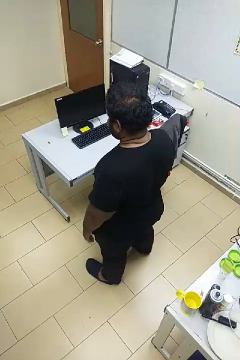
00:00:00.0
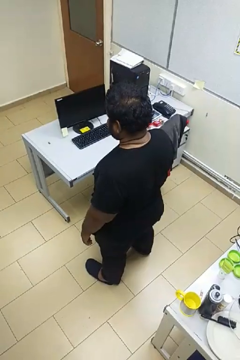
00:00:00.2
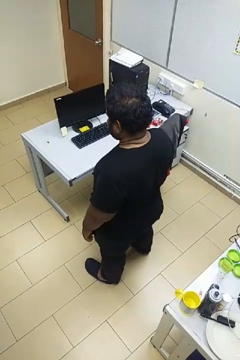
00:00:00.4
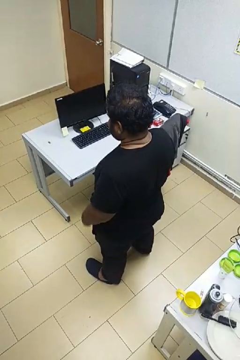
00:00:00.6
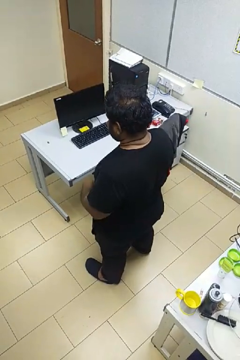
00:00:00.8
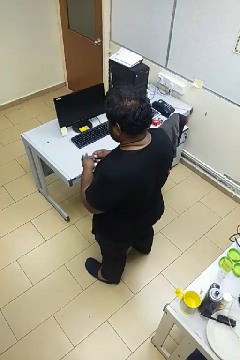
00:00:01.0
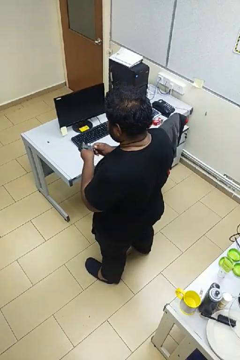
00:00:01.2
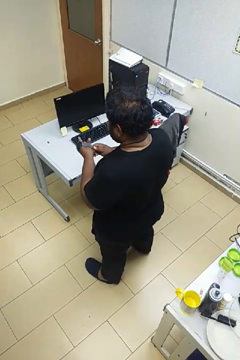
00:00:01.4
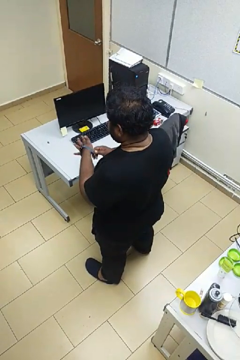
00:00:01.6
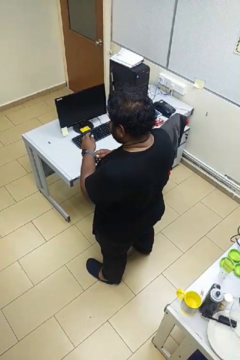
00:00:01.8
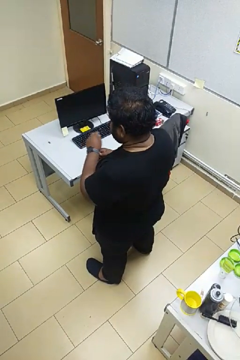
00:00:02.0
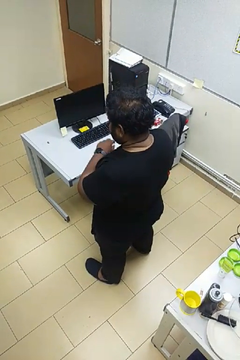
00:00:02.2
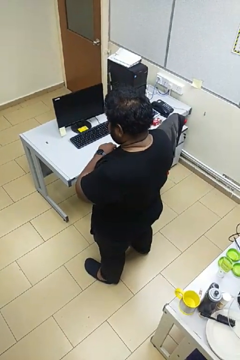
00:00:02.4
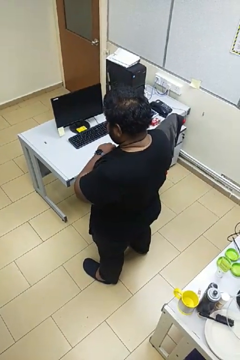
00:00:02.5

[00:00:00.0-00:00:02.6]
person puts on wristwatch

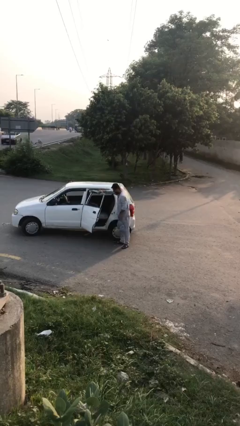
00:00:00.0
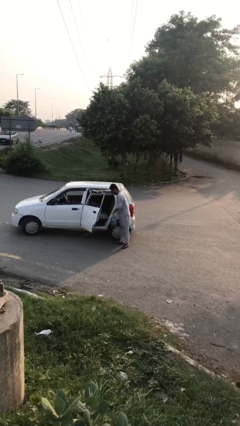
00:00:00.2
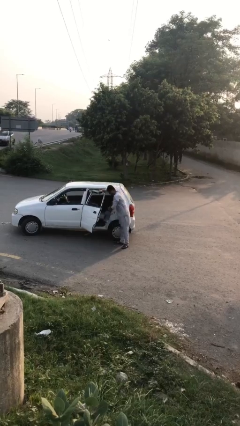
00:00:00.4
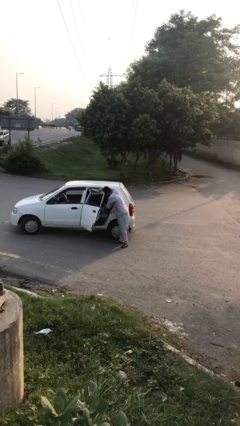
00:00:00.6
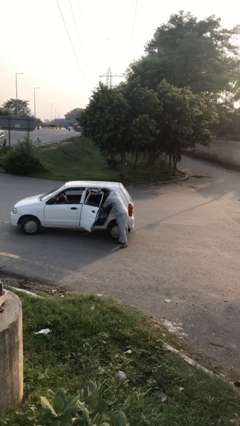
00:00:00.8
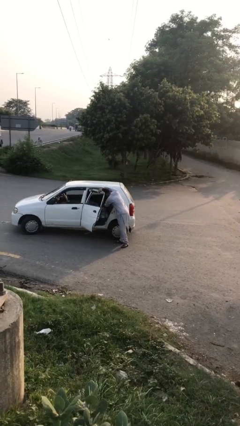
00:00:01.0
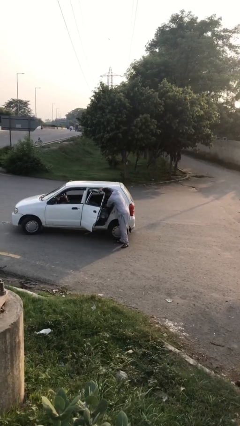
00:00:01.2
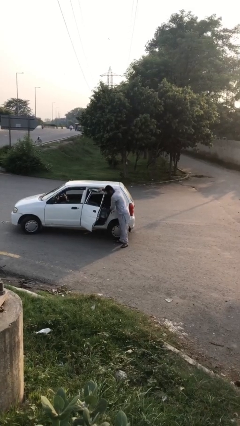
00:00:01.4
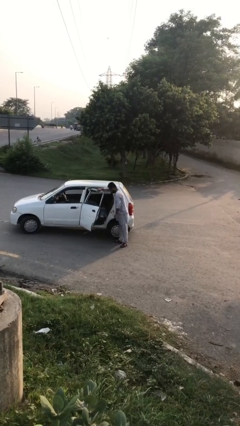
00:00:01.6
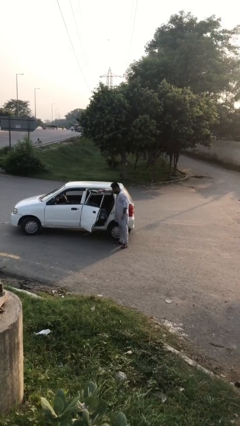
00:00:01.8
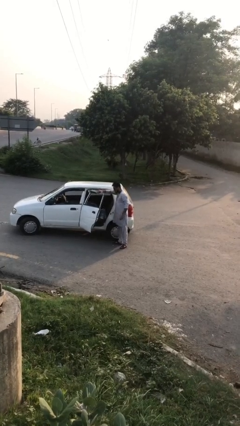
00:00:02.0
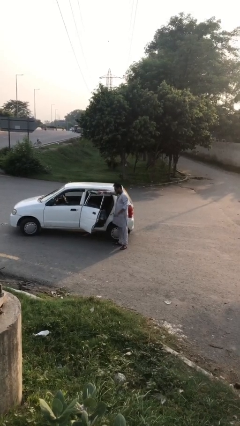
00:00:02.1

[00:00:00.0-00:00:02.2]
person loads car

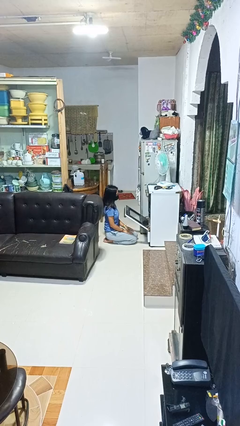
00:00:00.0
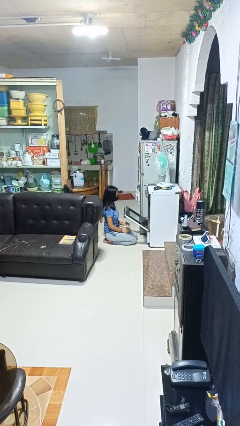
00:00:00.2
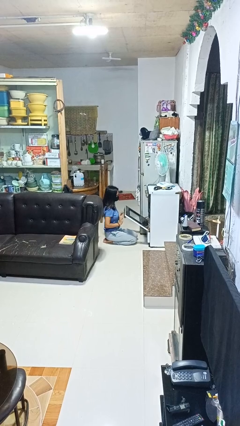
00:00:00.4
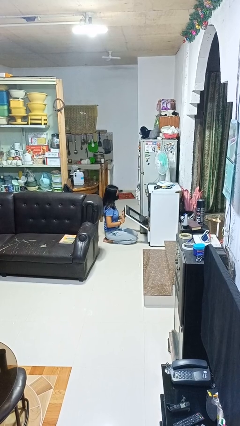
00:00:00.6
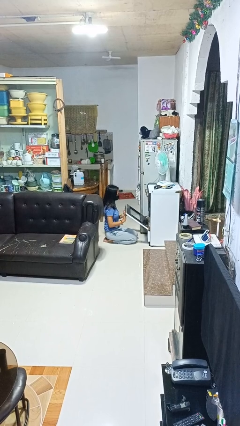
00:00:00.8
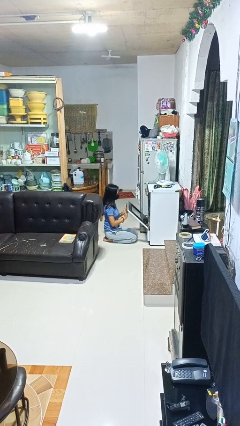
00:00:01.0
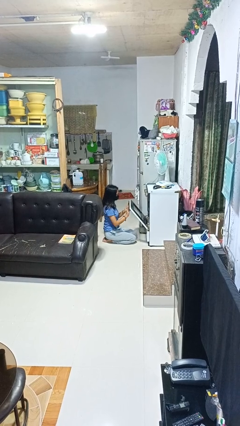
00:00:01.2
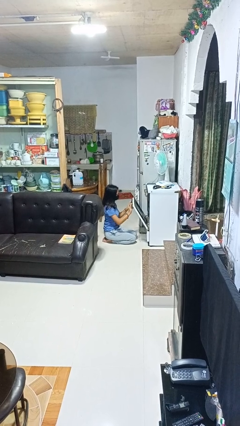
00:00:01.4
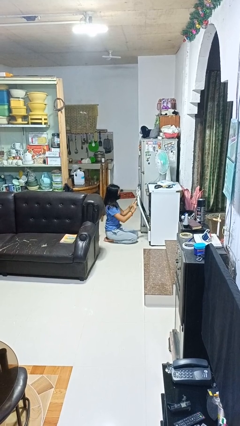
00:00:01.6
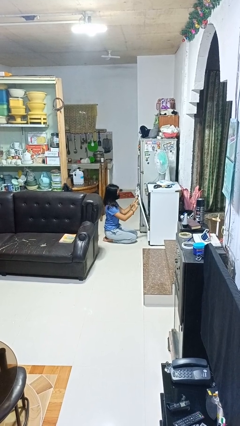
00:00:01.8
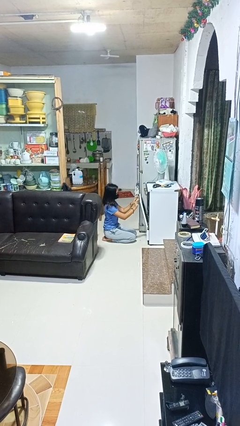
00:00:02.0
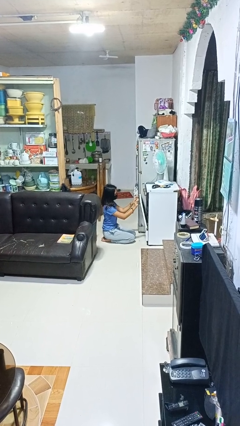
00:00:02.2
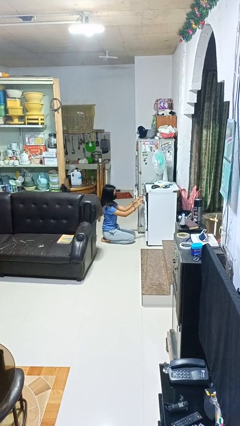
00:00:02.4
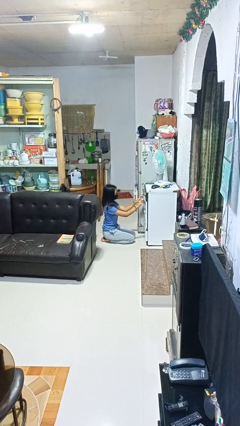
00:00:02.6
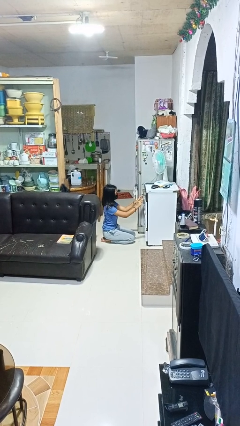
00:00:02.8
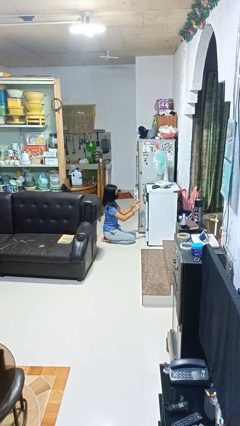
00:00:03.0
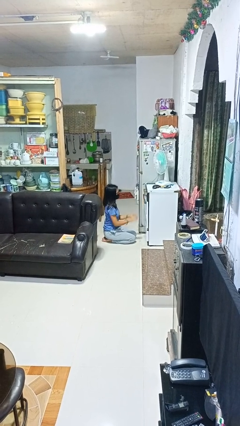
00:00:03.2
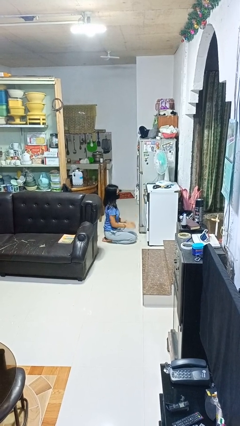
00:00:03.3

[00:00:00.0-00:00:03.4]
person closes oven door

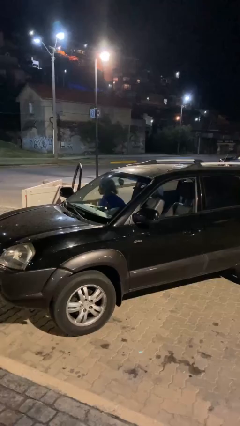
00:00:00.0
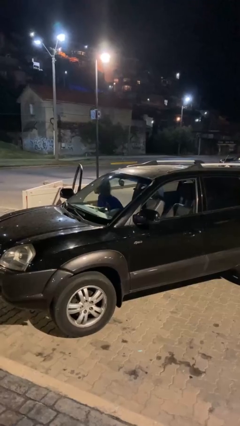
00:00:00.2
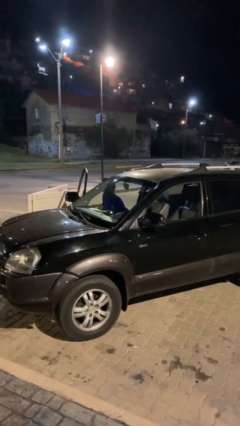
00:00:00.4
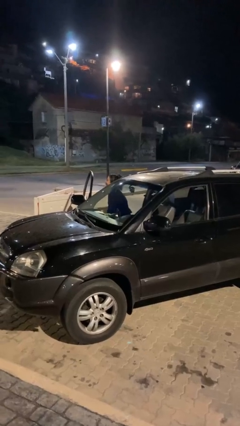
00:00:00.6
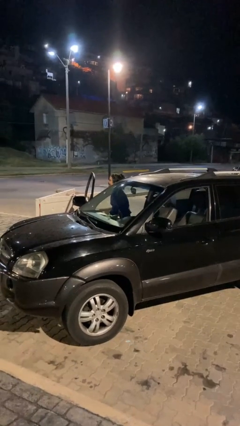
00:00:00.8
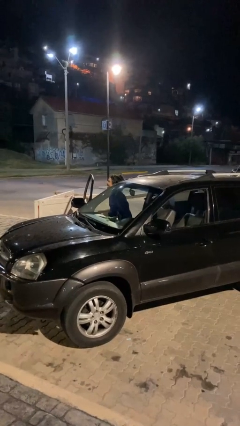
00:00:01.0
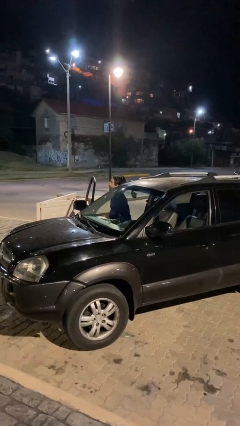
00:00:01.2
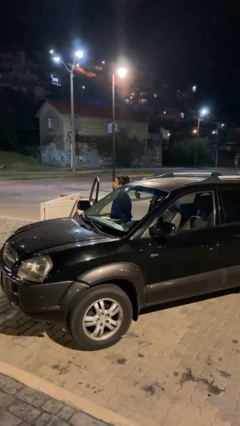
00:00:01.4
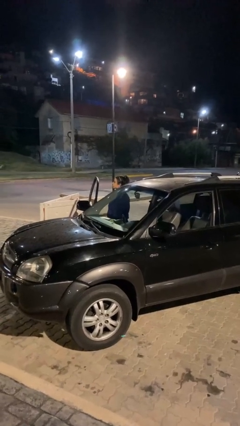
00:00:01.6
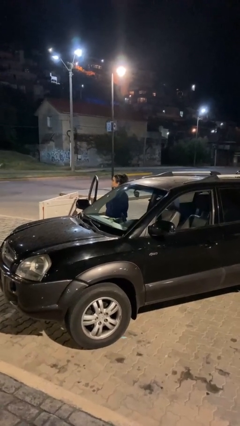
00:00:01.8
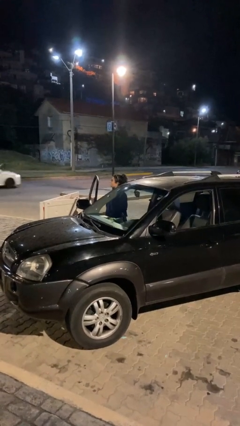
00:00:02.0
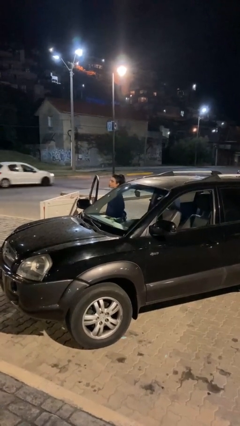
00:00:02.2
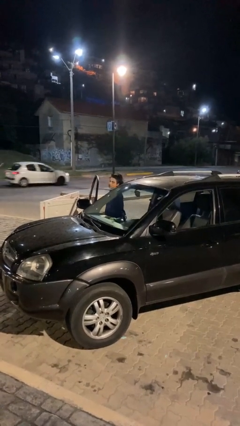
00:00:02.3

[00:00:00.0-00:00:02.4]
person exits car

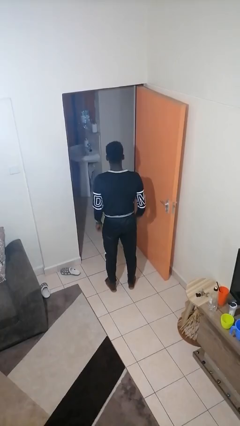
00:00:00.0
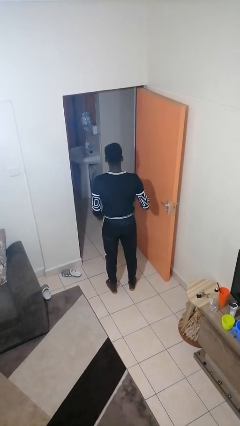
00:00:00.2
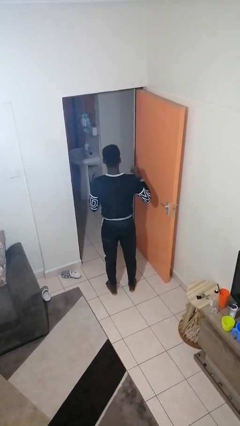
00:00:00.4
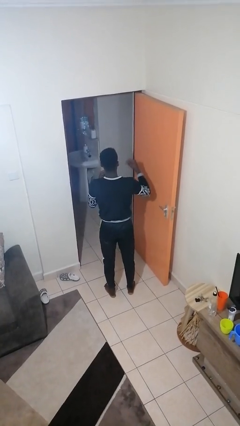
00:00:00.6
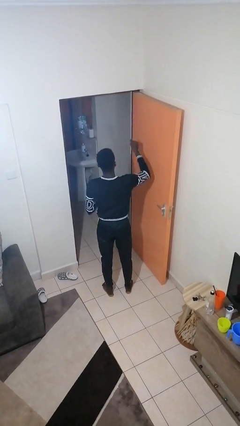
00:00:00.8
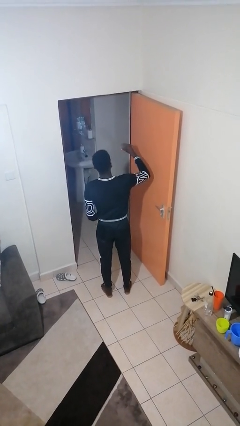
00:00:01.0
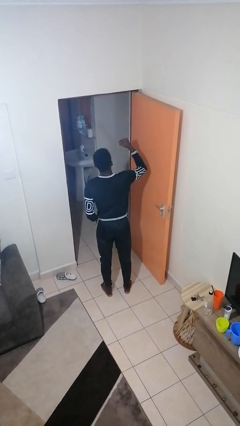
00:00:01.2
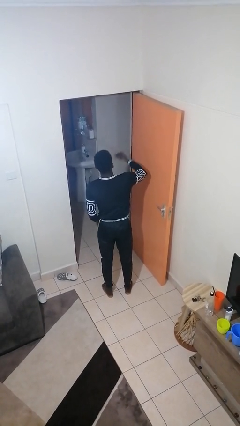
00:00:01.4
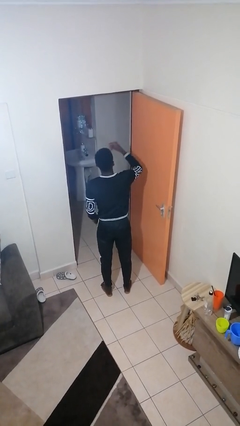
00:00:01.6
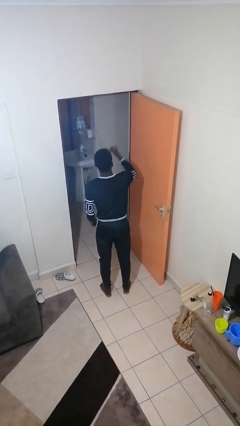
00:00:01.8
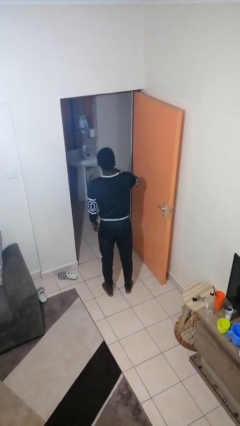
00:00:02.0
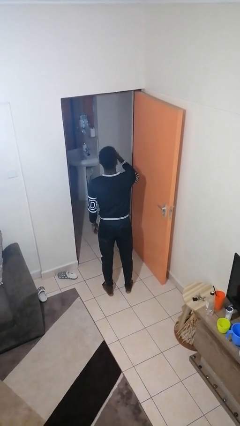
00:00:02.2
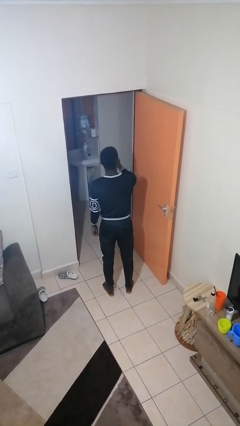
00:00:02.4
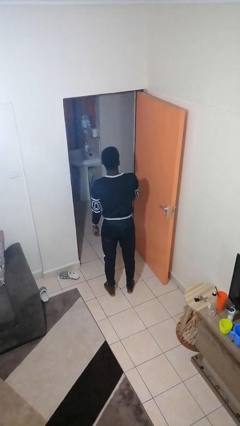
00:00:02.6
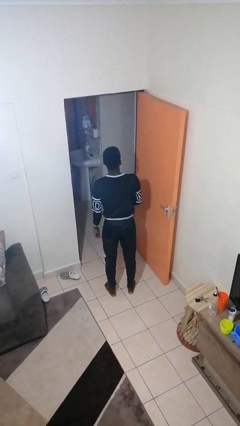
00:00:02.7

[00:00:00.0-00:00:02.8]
person snaps fingers

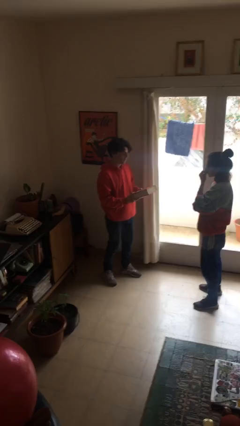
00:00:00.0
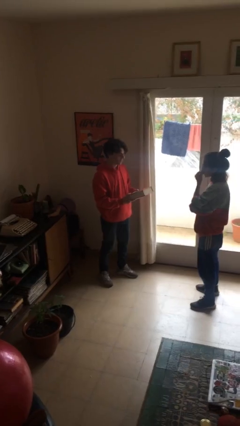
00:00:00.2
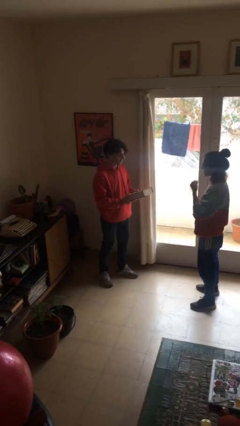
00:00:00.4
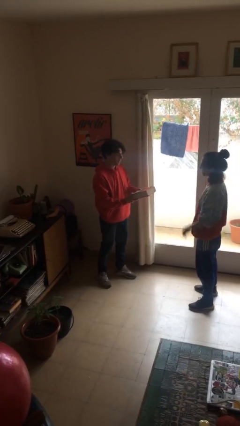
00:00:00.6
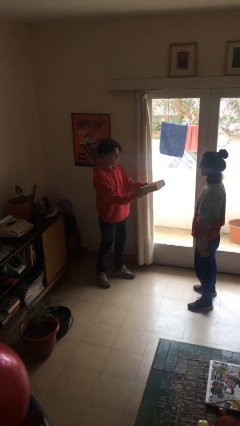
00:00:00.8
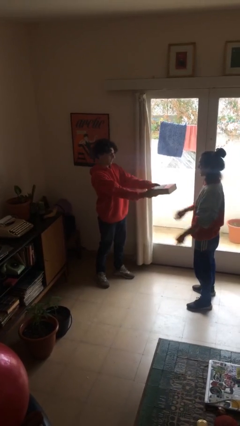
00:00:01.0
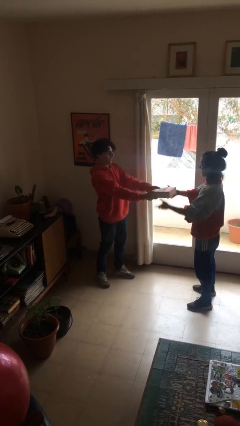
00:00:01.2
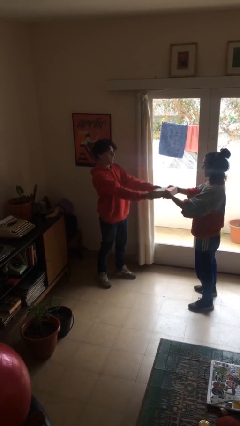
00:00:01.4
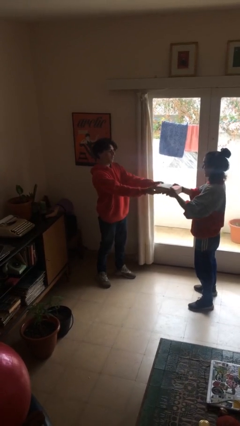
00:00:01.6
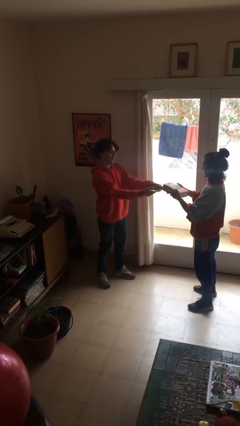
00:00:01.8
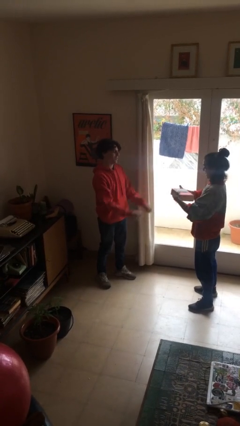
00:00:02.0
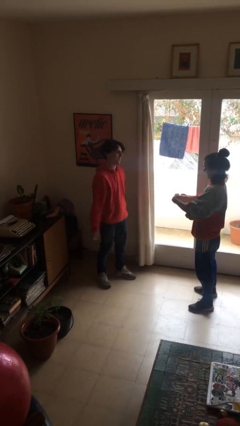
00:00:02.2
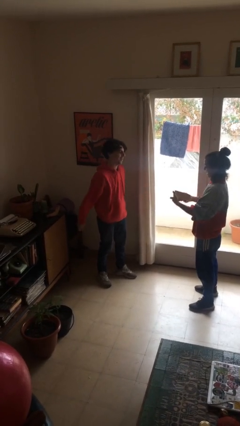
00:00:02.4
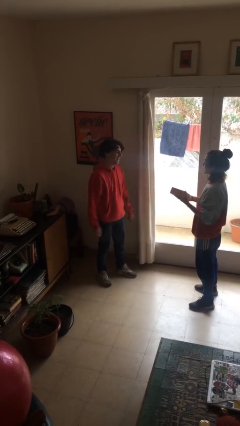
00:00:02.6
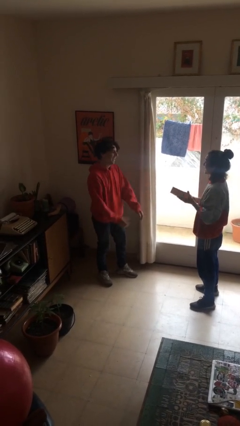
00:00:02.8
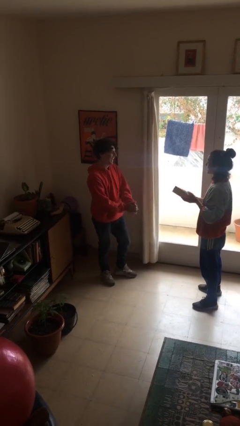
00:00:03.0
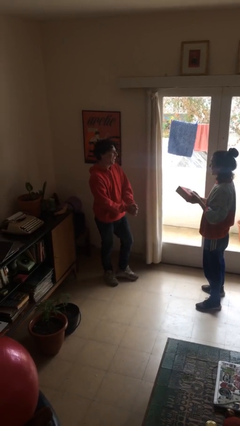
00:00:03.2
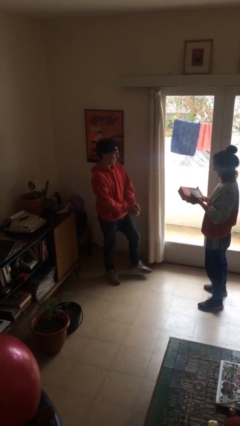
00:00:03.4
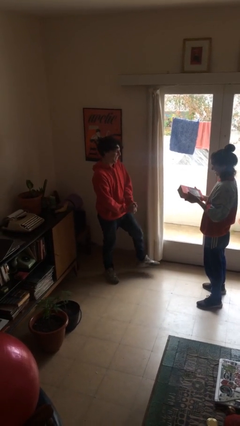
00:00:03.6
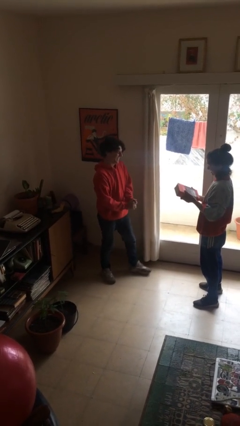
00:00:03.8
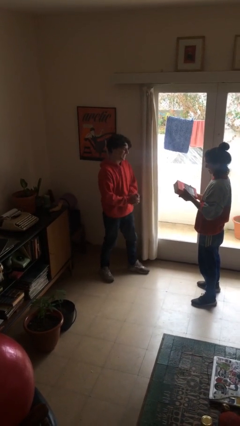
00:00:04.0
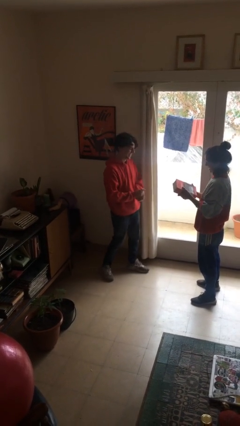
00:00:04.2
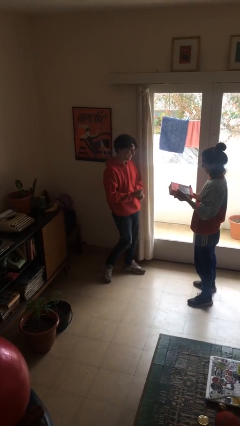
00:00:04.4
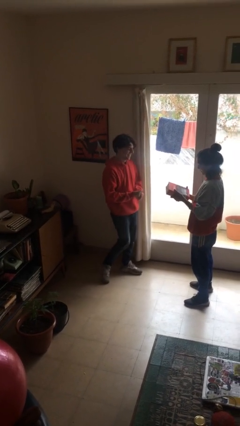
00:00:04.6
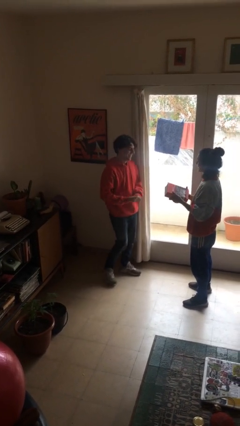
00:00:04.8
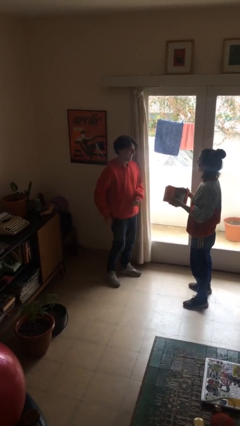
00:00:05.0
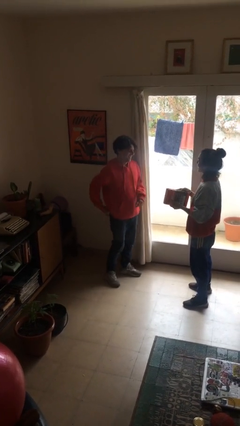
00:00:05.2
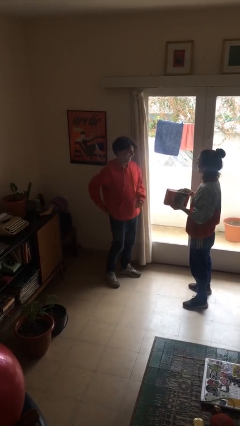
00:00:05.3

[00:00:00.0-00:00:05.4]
person transfers object to person
